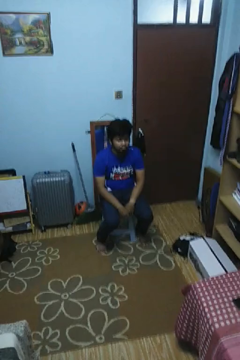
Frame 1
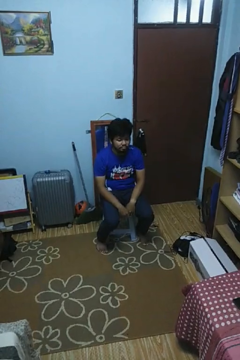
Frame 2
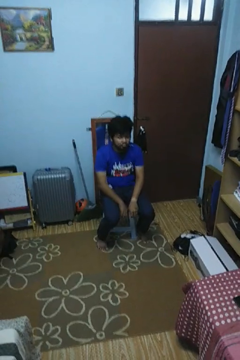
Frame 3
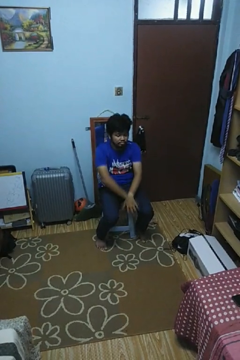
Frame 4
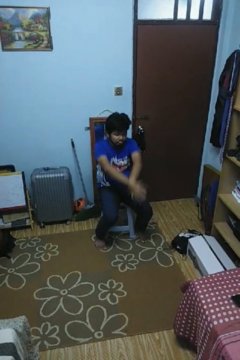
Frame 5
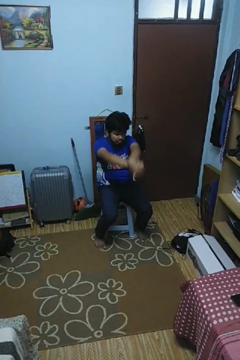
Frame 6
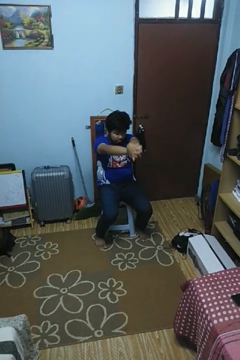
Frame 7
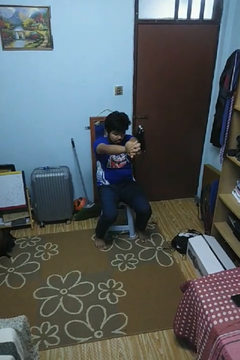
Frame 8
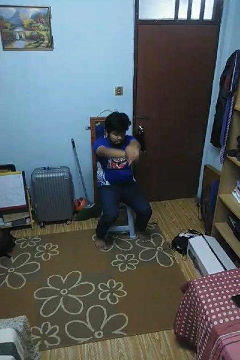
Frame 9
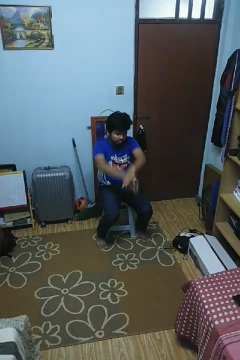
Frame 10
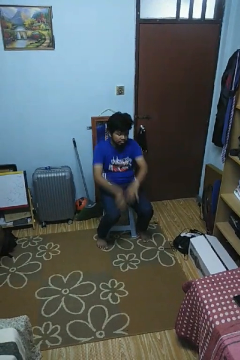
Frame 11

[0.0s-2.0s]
person crosses arms

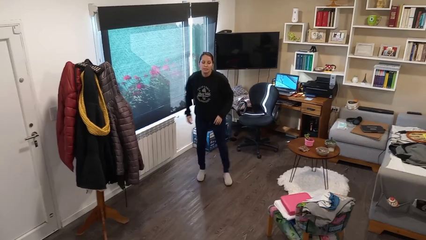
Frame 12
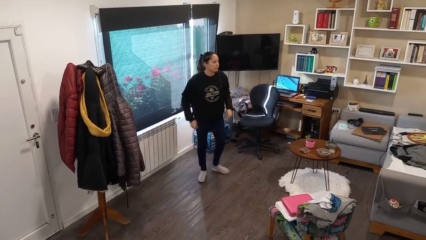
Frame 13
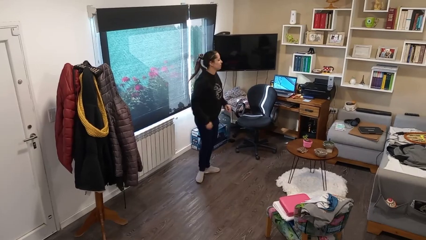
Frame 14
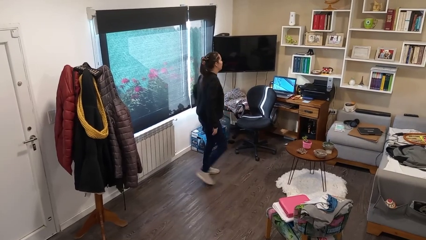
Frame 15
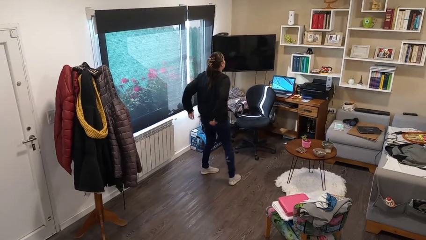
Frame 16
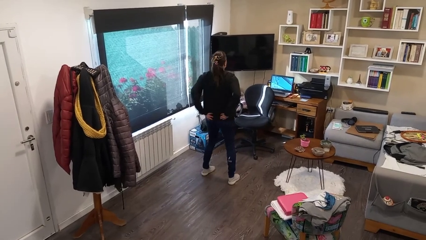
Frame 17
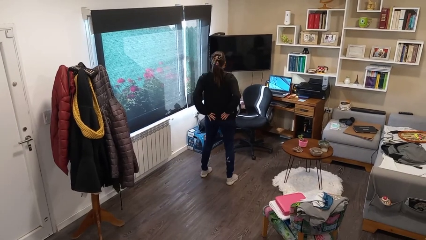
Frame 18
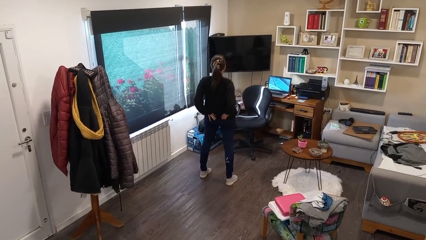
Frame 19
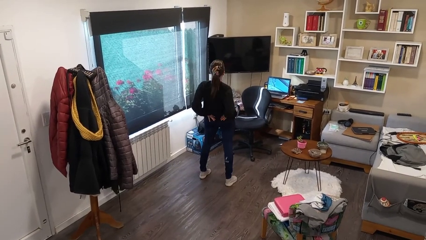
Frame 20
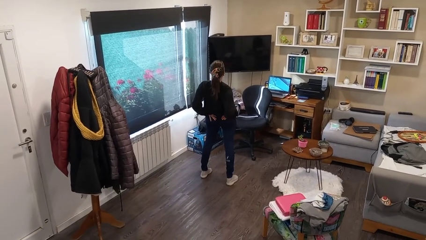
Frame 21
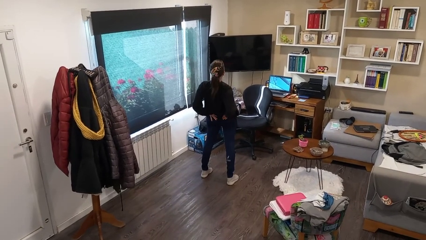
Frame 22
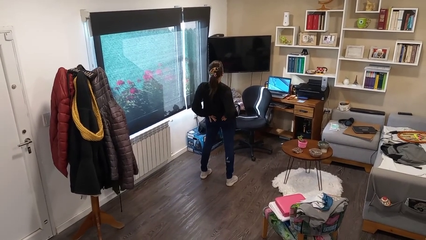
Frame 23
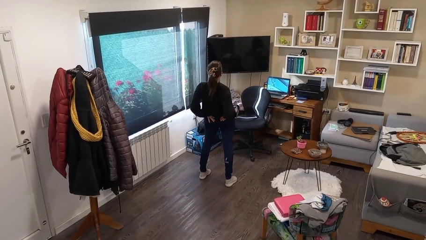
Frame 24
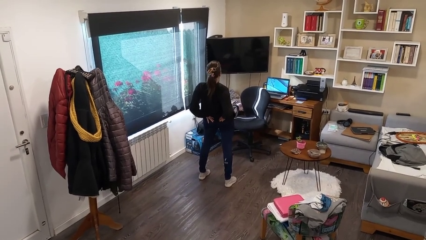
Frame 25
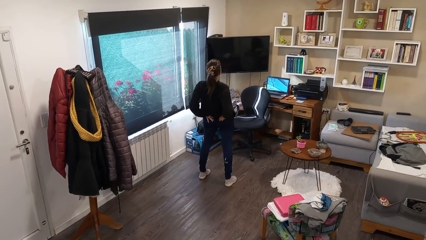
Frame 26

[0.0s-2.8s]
person stretches back

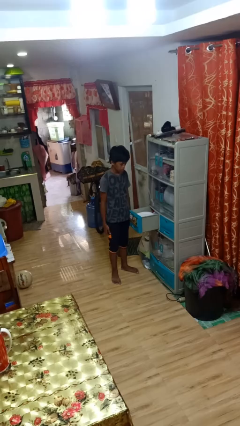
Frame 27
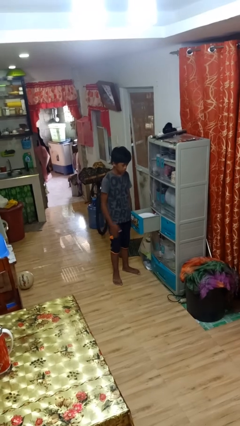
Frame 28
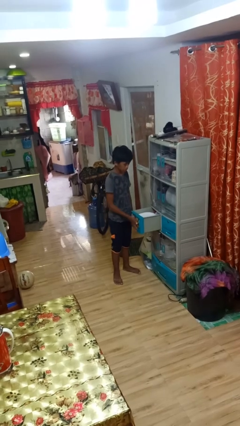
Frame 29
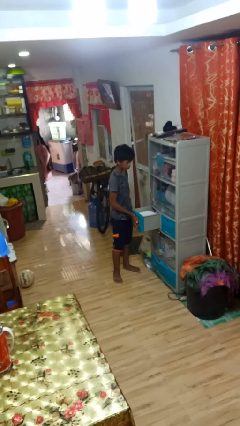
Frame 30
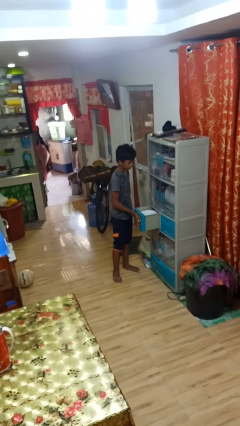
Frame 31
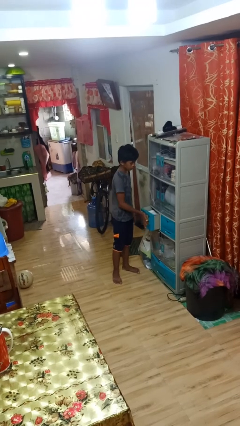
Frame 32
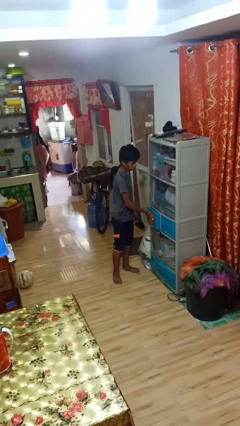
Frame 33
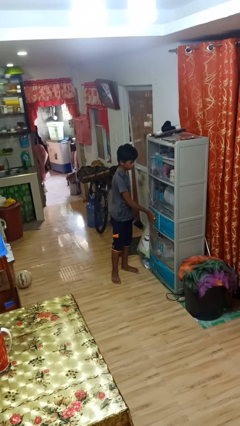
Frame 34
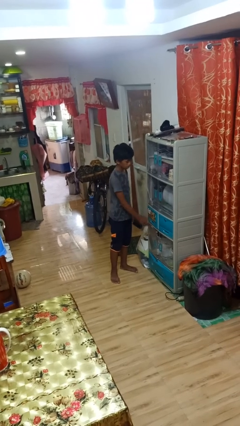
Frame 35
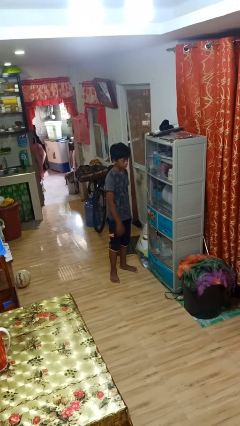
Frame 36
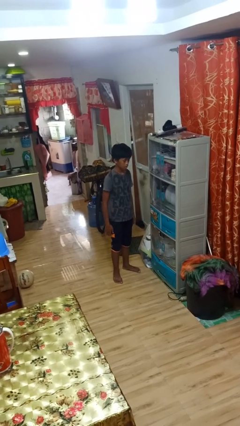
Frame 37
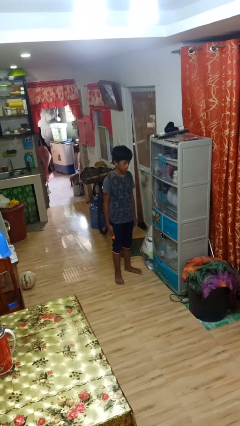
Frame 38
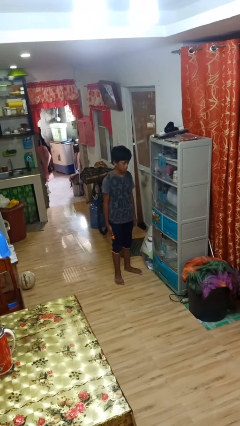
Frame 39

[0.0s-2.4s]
person closes kitchen drawer

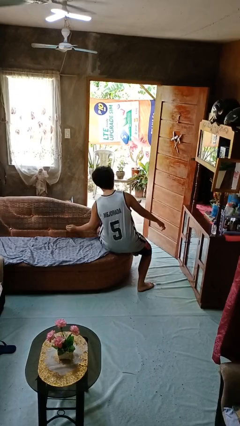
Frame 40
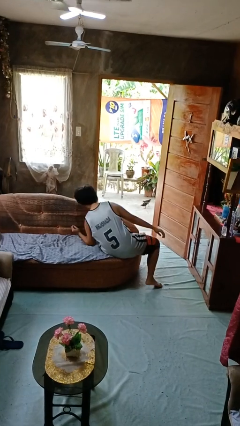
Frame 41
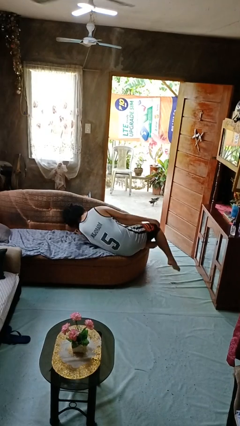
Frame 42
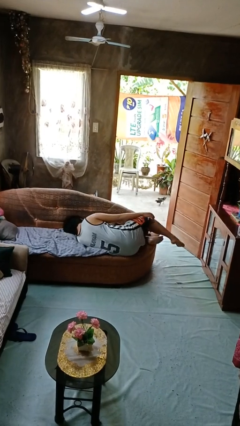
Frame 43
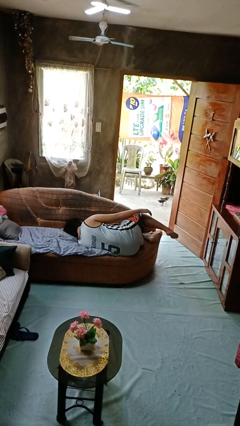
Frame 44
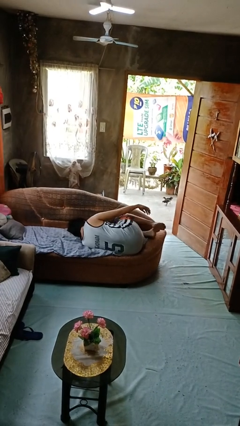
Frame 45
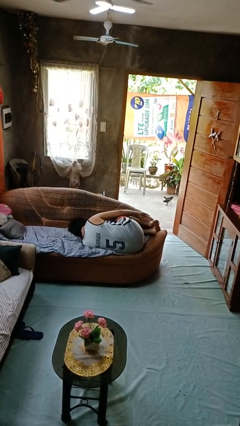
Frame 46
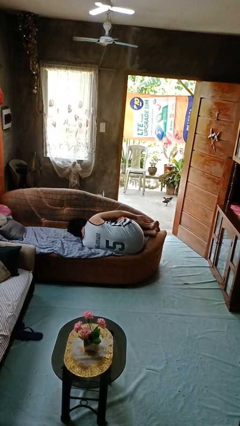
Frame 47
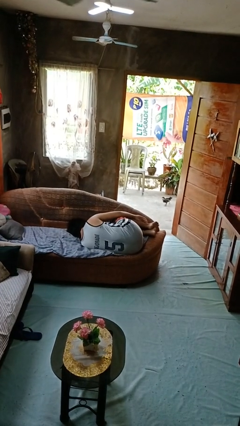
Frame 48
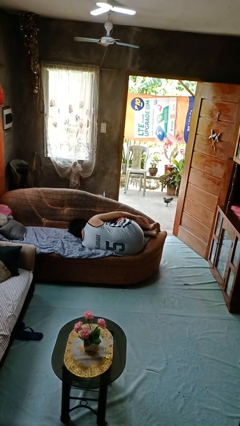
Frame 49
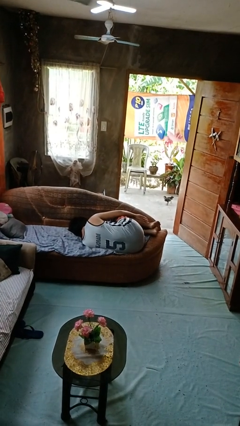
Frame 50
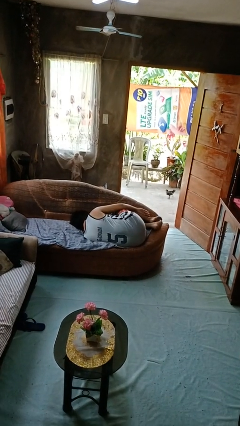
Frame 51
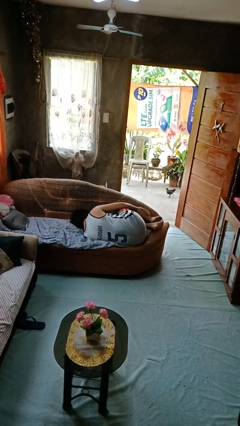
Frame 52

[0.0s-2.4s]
person lies down on couch

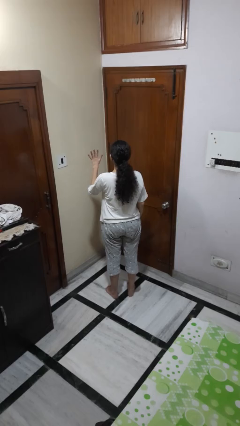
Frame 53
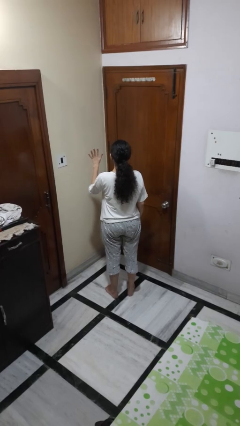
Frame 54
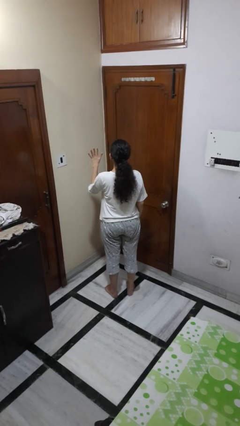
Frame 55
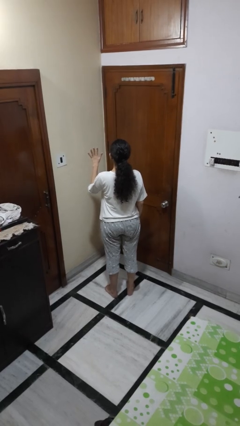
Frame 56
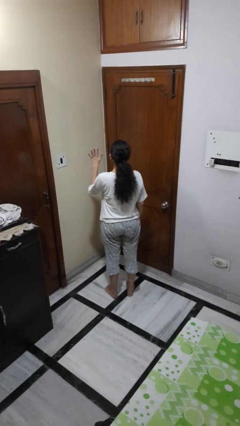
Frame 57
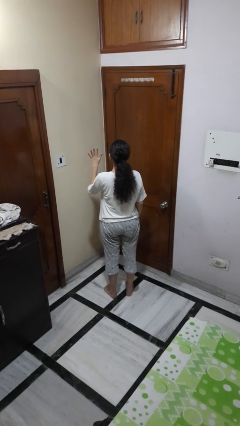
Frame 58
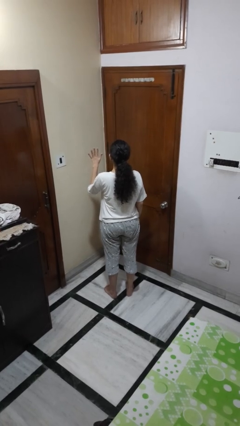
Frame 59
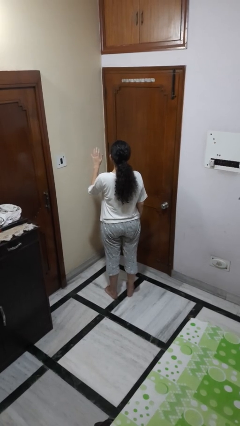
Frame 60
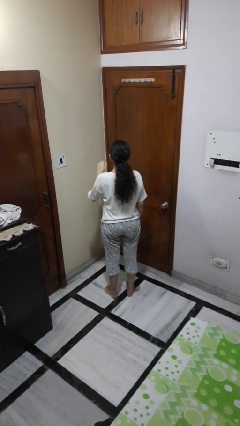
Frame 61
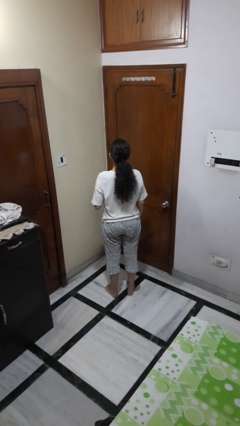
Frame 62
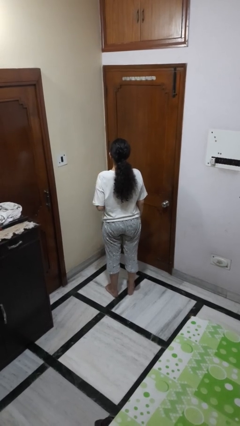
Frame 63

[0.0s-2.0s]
person gestures number five

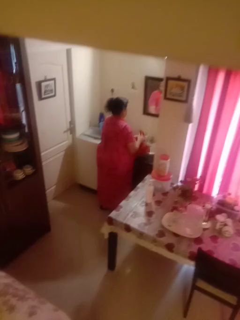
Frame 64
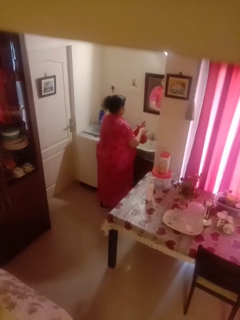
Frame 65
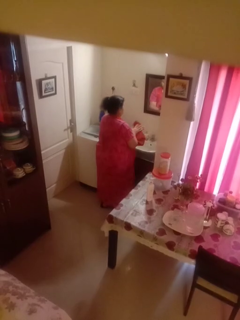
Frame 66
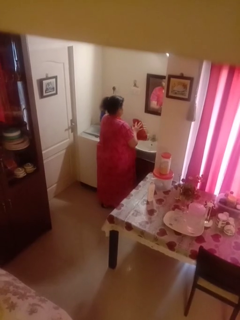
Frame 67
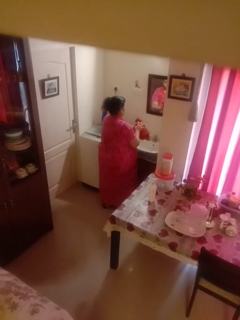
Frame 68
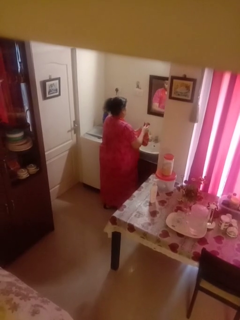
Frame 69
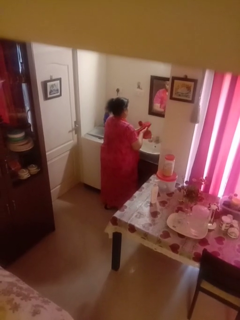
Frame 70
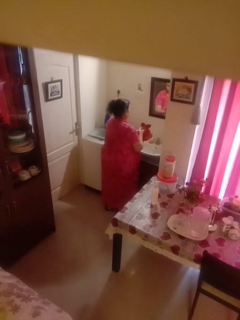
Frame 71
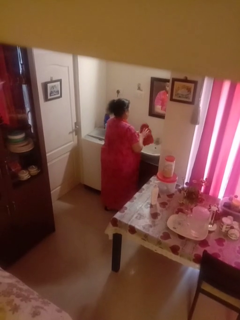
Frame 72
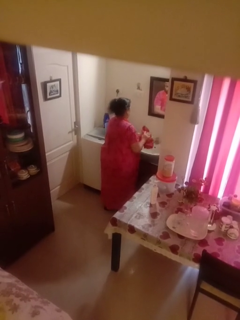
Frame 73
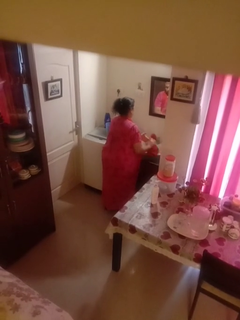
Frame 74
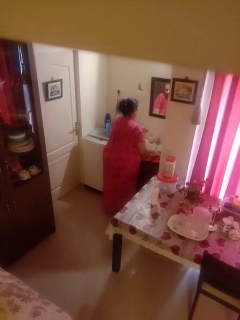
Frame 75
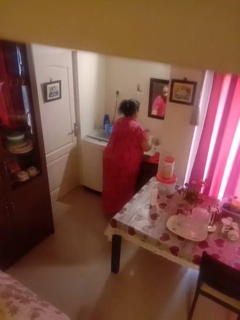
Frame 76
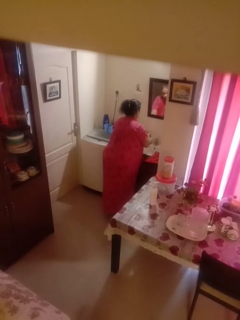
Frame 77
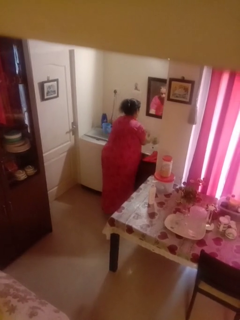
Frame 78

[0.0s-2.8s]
person dries hands with towel

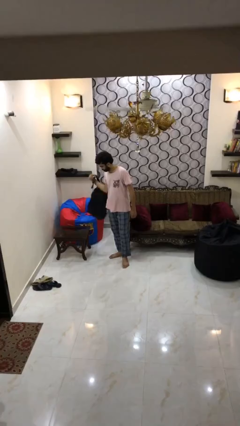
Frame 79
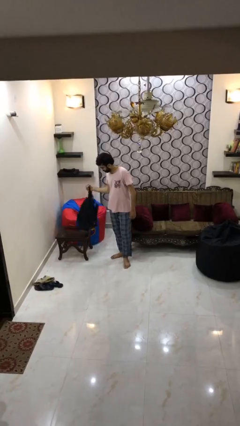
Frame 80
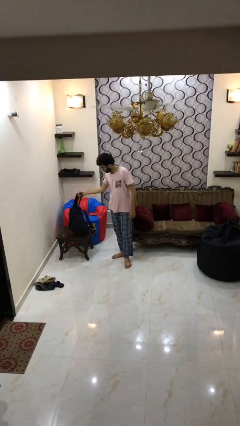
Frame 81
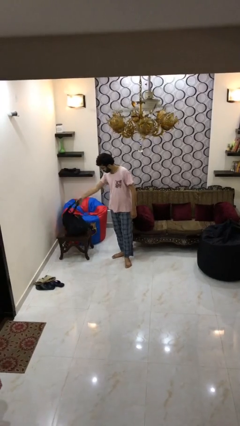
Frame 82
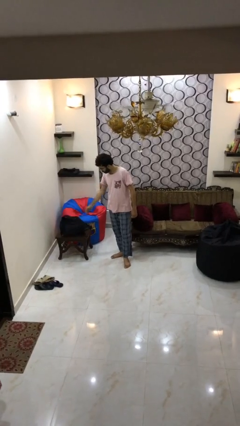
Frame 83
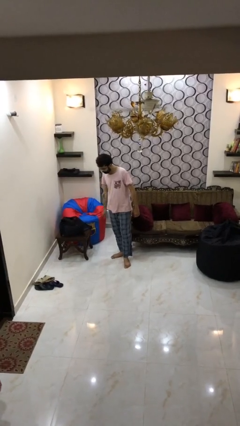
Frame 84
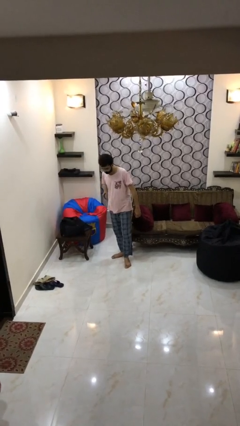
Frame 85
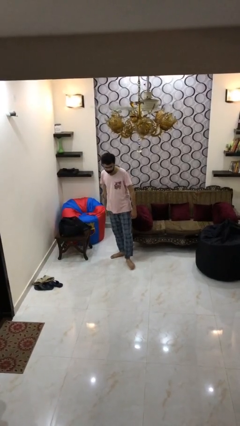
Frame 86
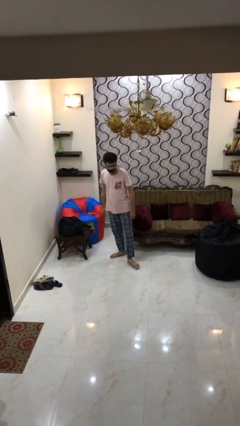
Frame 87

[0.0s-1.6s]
person puts down object on table

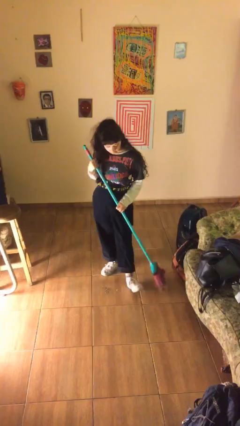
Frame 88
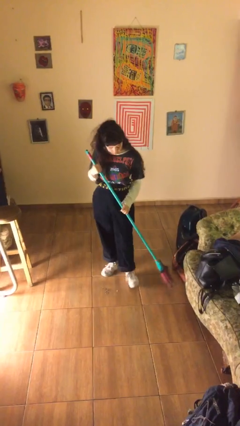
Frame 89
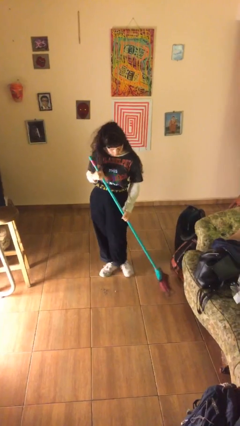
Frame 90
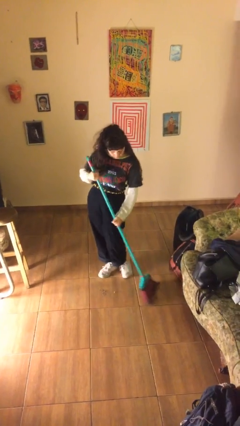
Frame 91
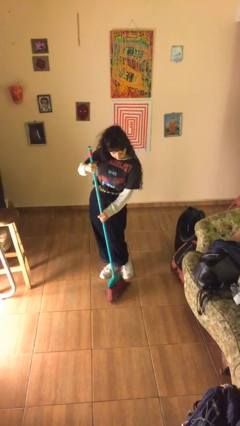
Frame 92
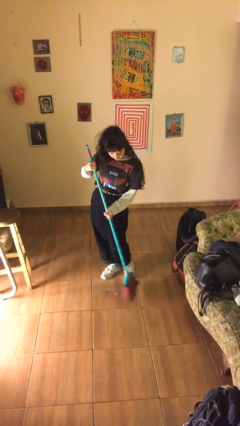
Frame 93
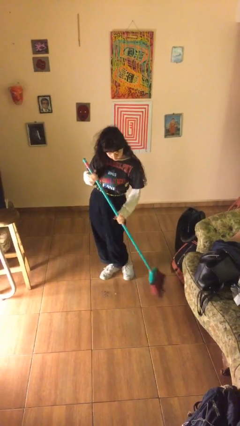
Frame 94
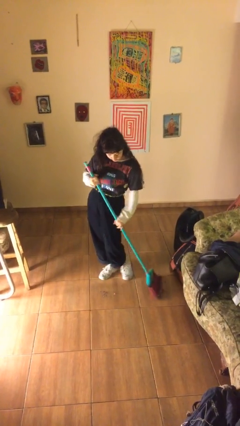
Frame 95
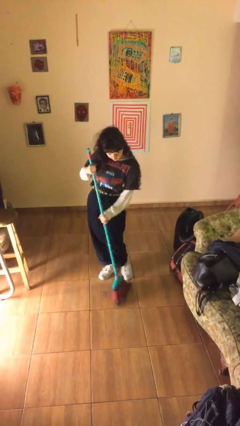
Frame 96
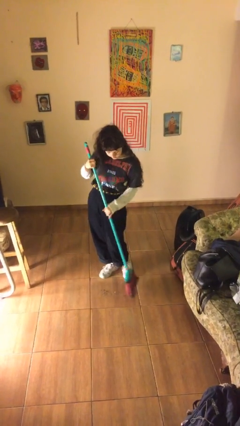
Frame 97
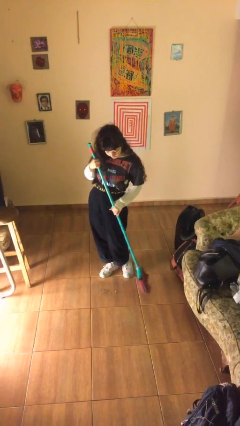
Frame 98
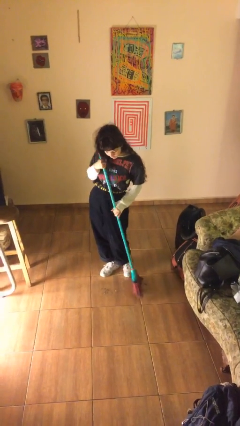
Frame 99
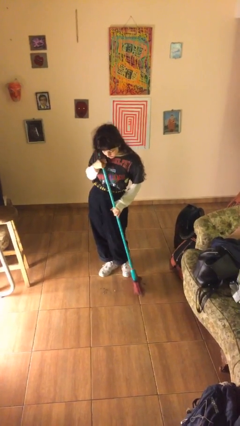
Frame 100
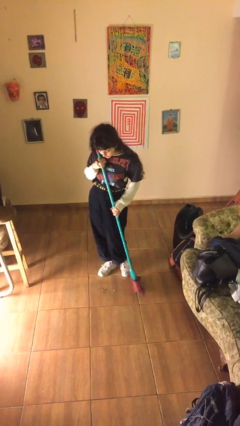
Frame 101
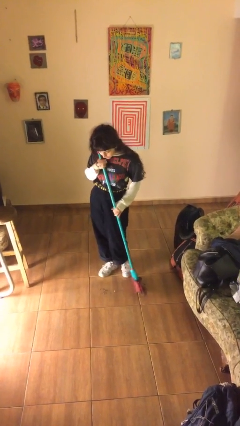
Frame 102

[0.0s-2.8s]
person sweeps floor
